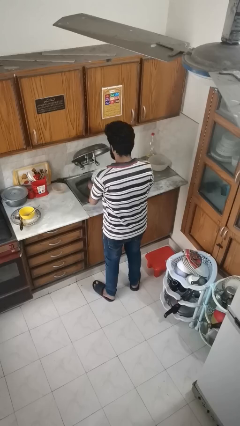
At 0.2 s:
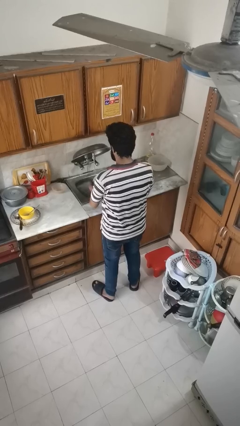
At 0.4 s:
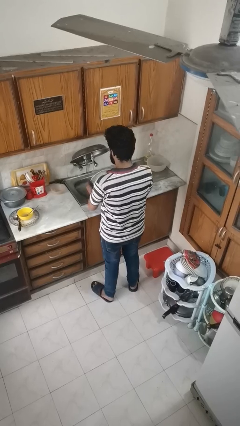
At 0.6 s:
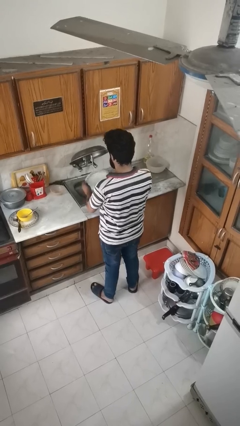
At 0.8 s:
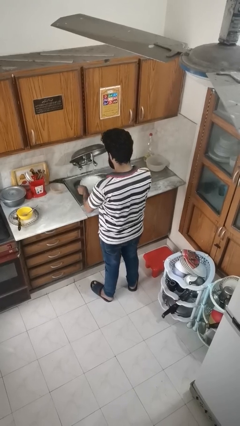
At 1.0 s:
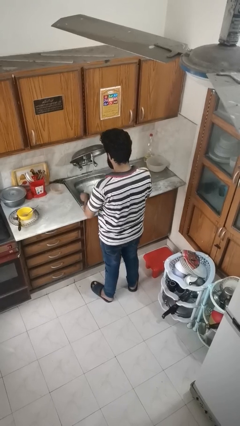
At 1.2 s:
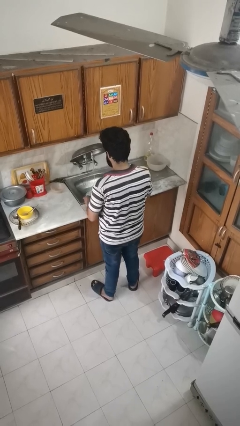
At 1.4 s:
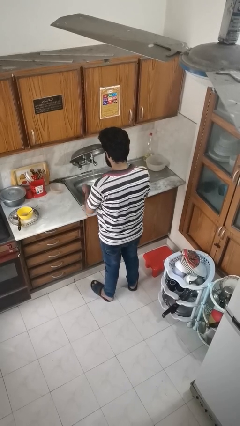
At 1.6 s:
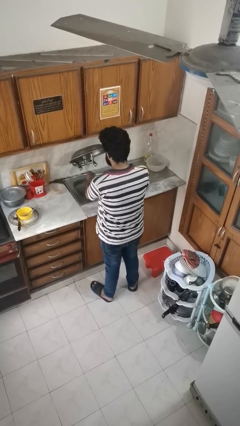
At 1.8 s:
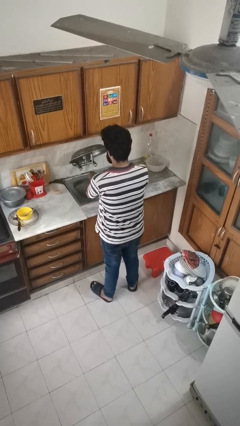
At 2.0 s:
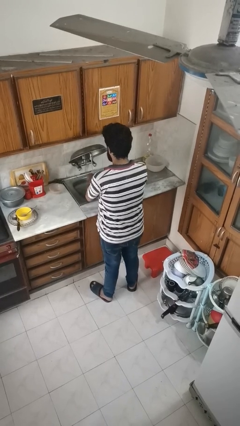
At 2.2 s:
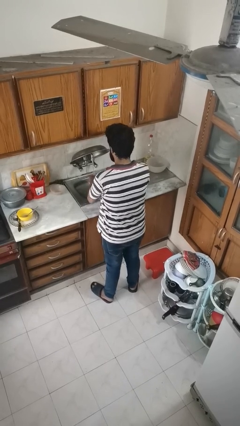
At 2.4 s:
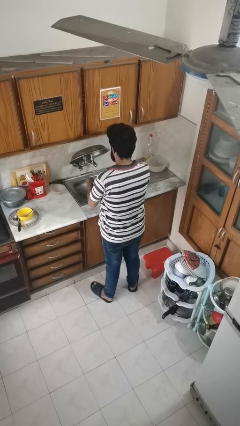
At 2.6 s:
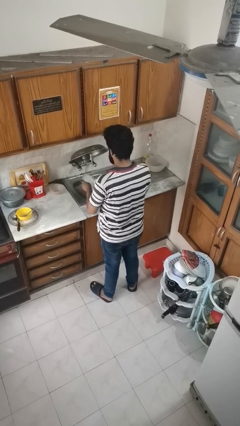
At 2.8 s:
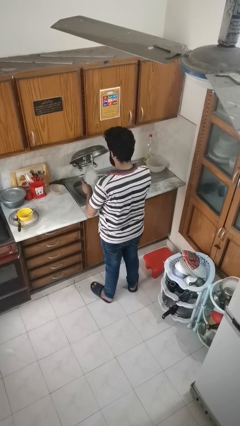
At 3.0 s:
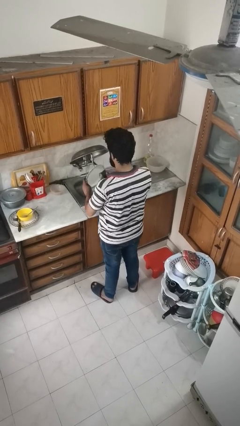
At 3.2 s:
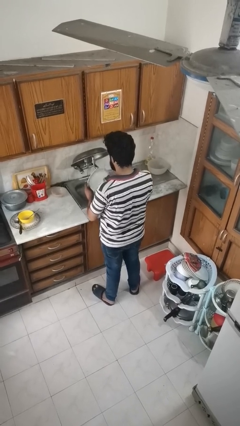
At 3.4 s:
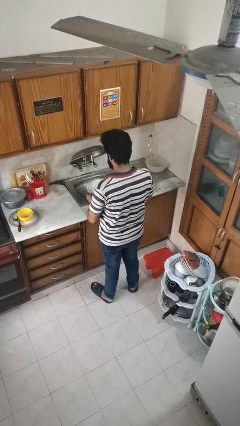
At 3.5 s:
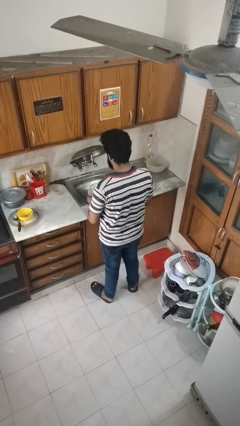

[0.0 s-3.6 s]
person washes dish

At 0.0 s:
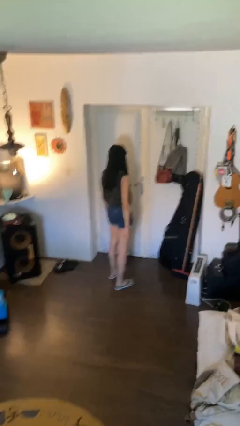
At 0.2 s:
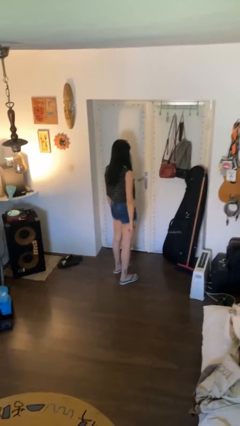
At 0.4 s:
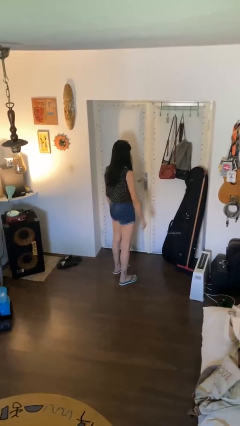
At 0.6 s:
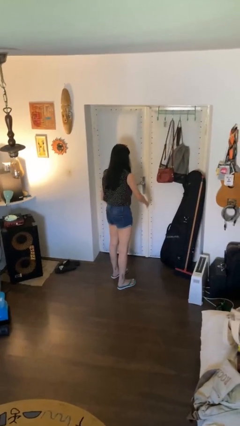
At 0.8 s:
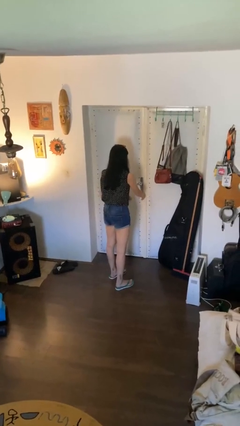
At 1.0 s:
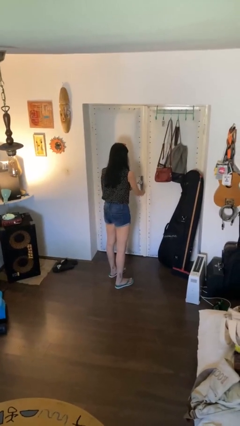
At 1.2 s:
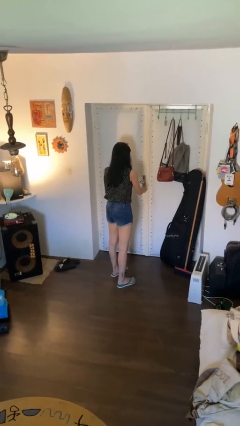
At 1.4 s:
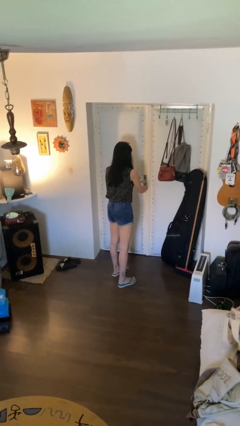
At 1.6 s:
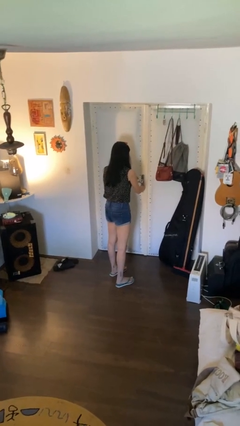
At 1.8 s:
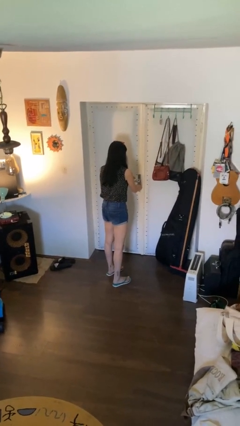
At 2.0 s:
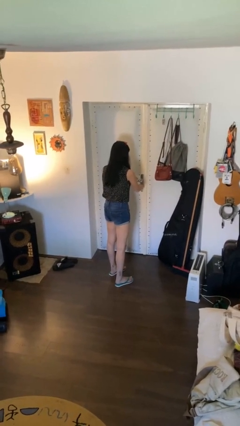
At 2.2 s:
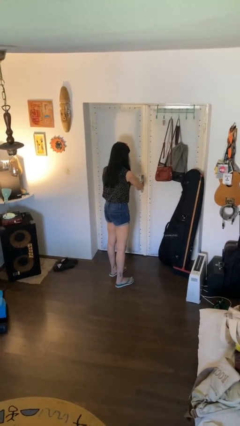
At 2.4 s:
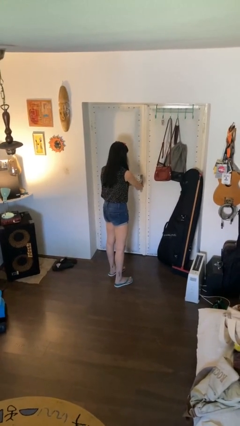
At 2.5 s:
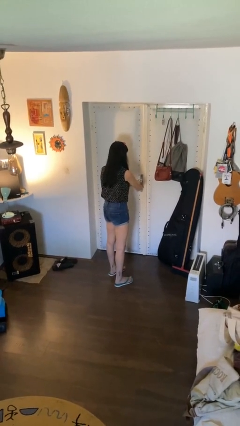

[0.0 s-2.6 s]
person unlocks door with keys

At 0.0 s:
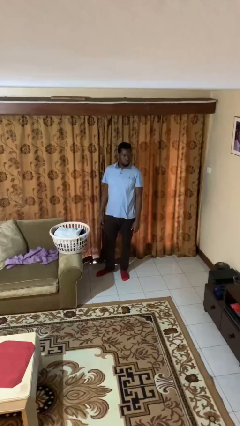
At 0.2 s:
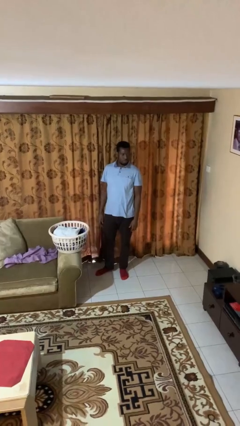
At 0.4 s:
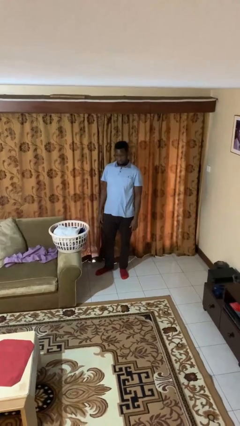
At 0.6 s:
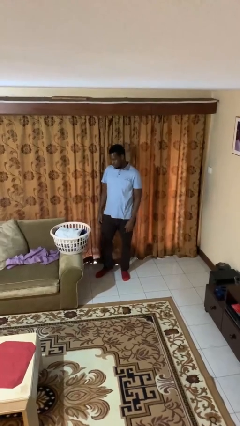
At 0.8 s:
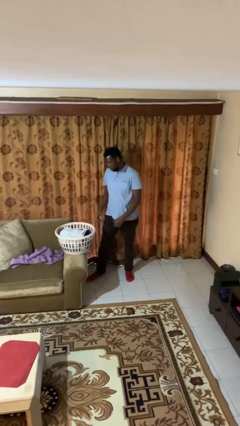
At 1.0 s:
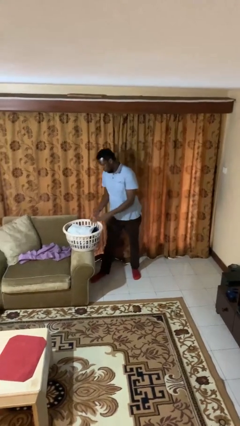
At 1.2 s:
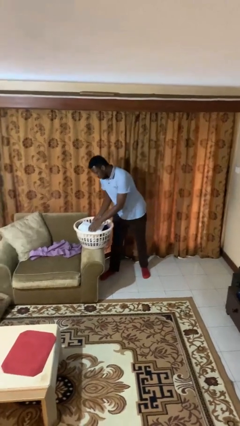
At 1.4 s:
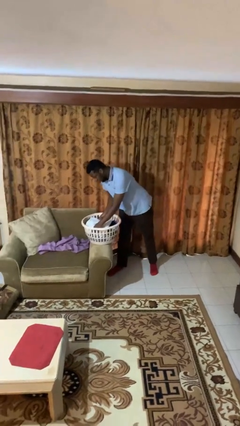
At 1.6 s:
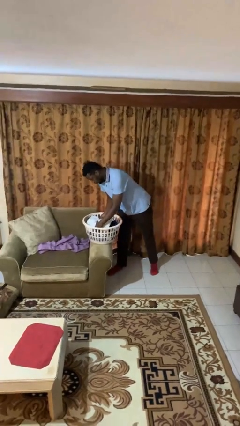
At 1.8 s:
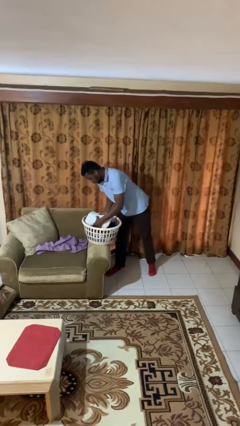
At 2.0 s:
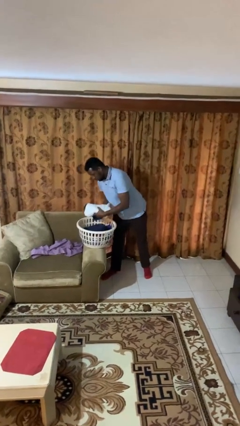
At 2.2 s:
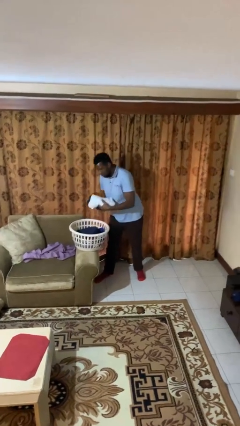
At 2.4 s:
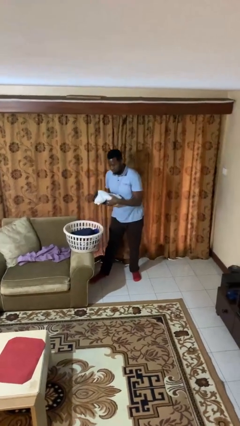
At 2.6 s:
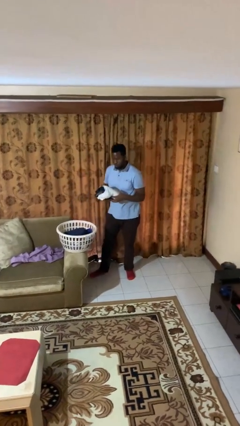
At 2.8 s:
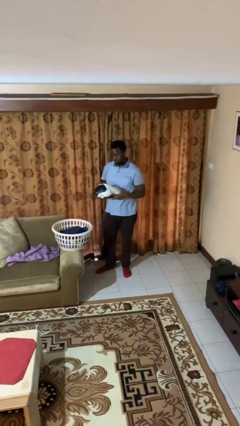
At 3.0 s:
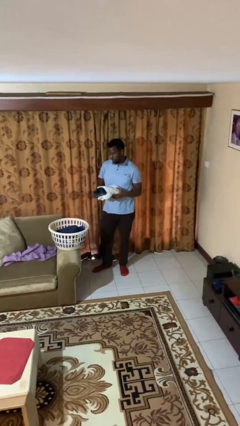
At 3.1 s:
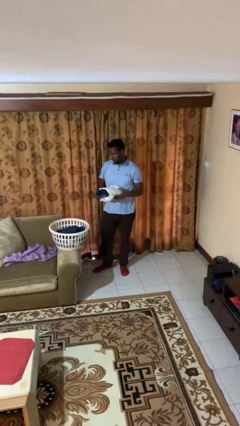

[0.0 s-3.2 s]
person takes object from basket

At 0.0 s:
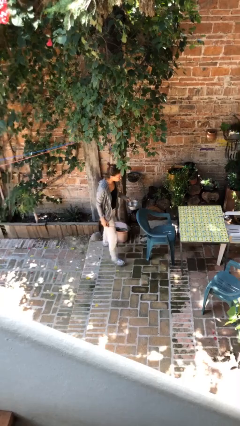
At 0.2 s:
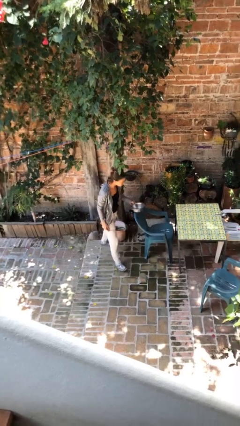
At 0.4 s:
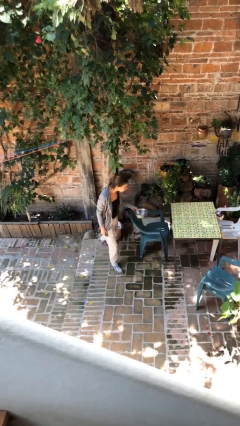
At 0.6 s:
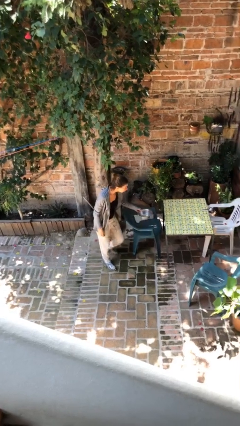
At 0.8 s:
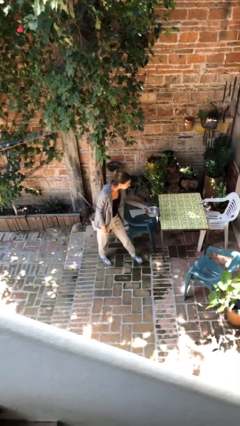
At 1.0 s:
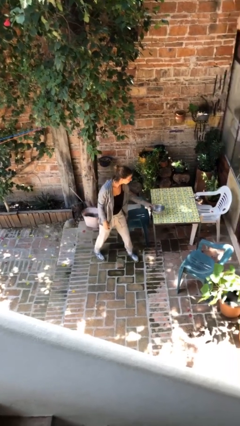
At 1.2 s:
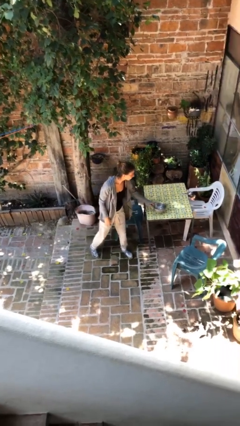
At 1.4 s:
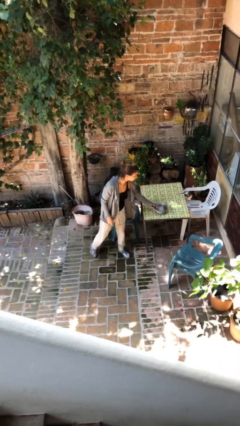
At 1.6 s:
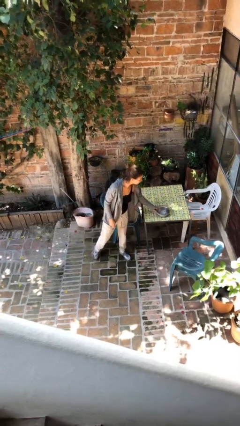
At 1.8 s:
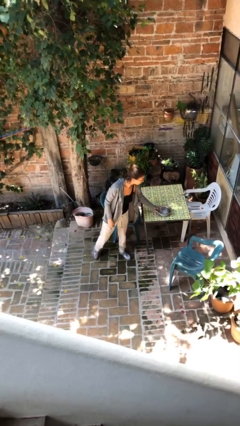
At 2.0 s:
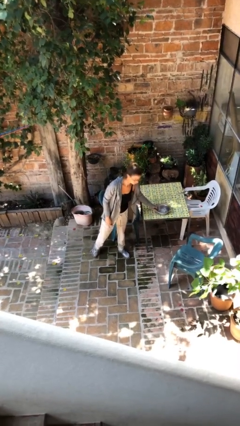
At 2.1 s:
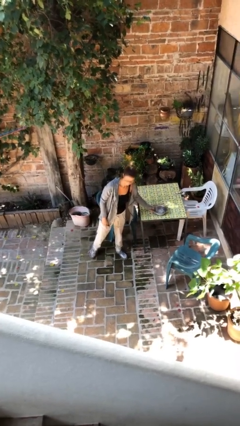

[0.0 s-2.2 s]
person puts down object on table

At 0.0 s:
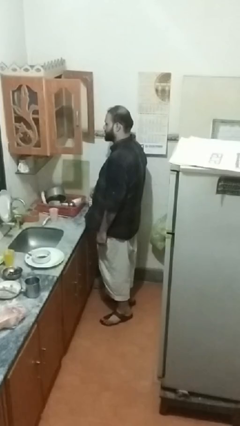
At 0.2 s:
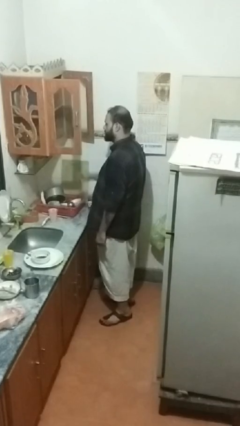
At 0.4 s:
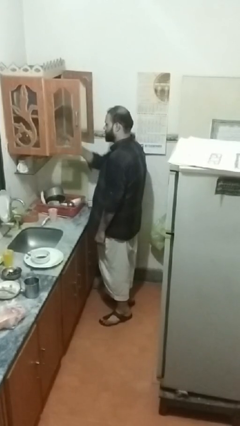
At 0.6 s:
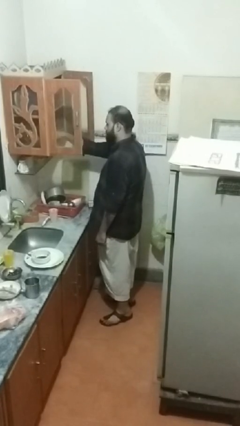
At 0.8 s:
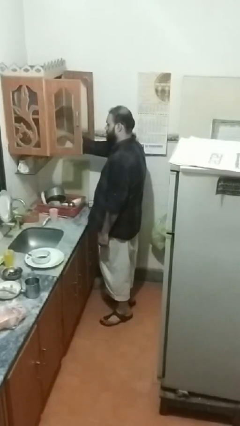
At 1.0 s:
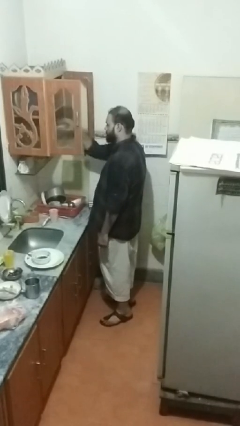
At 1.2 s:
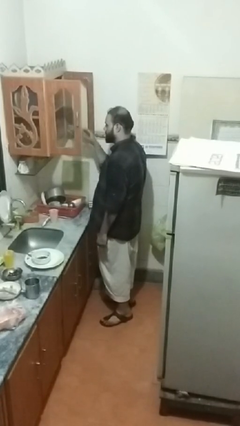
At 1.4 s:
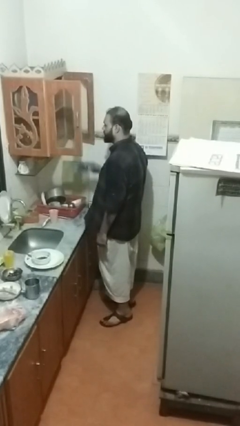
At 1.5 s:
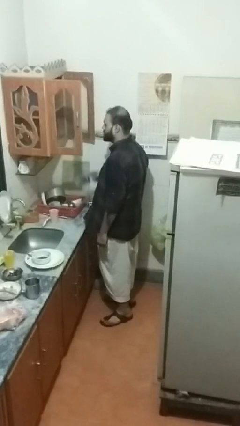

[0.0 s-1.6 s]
person takes object from cabinet

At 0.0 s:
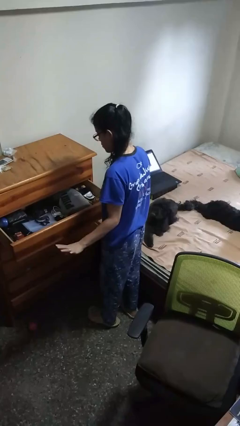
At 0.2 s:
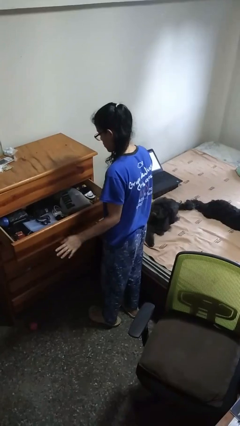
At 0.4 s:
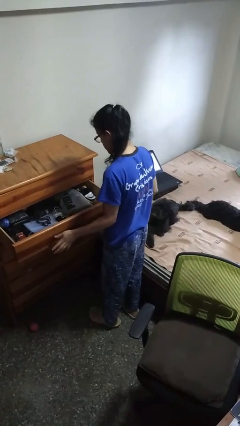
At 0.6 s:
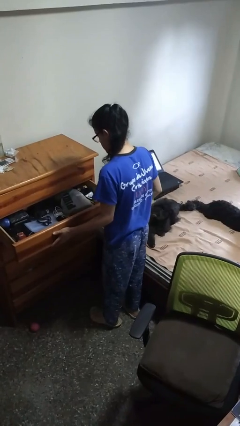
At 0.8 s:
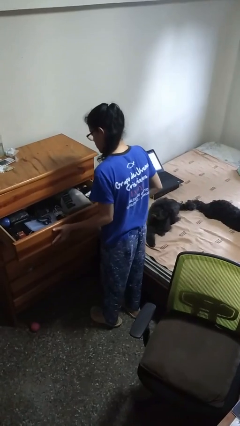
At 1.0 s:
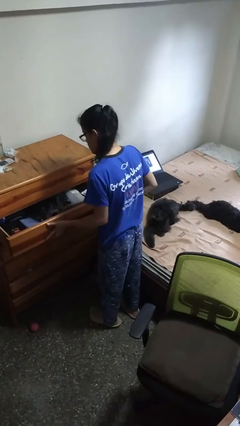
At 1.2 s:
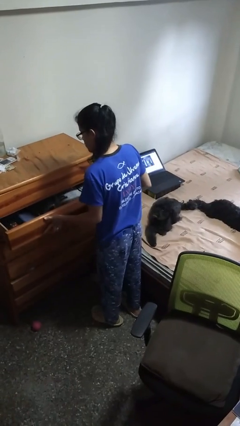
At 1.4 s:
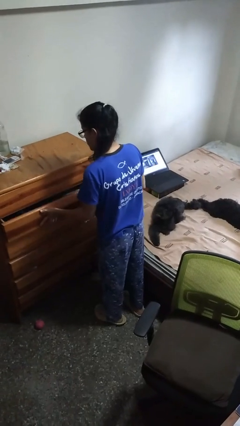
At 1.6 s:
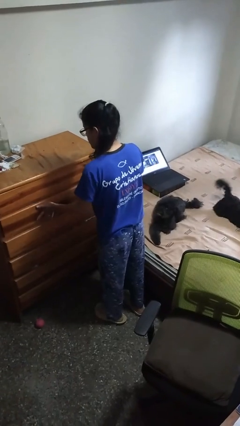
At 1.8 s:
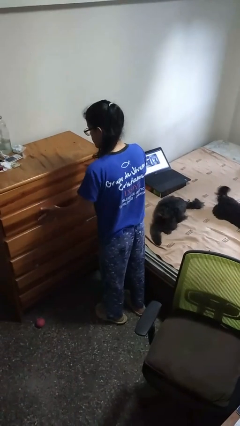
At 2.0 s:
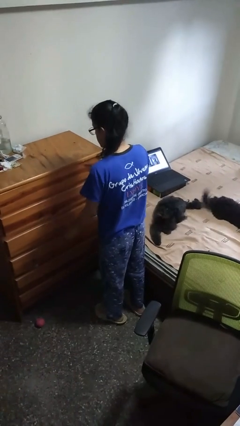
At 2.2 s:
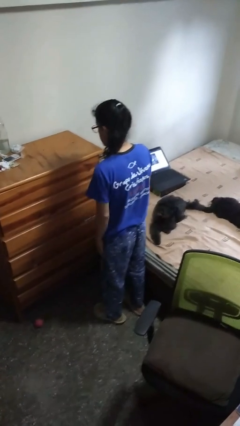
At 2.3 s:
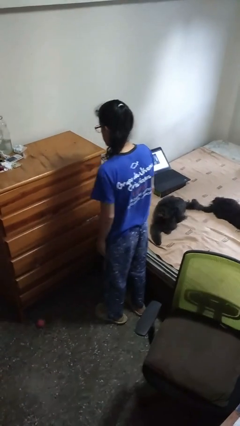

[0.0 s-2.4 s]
person closes dresser drawer

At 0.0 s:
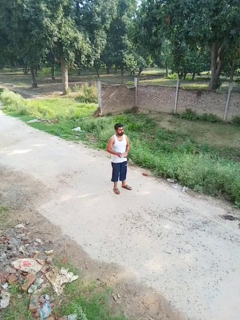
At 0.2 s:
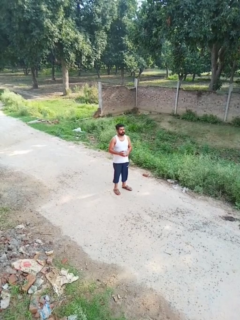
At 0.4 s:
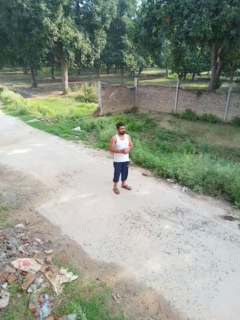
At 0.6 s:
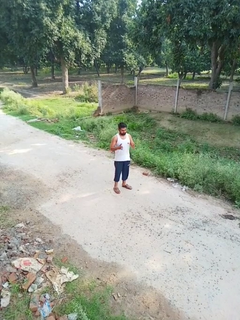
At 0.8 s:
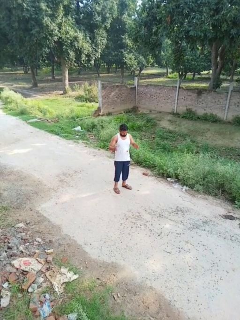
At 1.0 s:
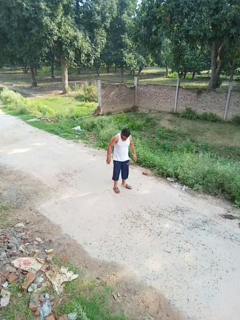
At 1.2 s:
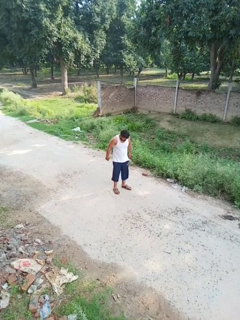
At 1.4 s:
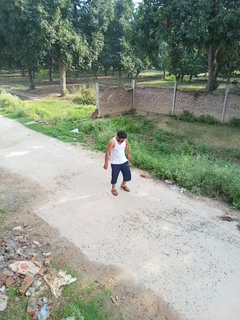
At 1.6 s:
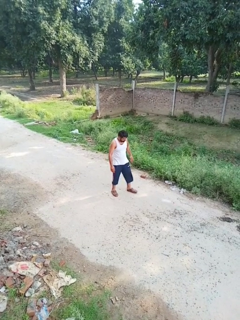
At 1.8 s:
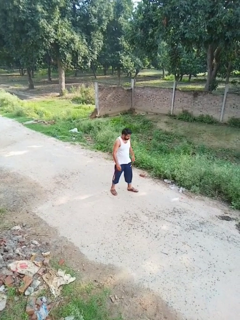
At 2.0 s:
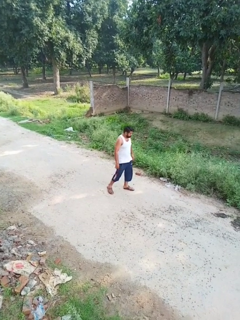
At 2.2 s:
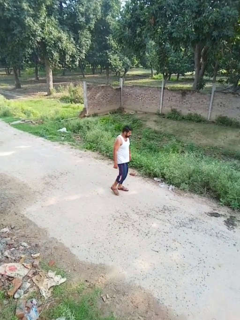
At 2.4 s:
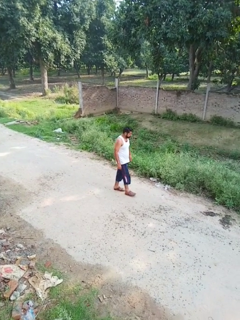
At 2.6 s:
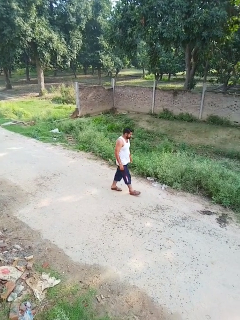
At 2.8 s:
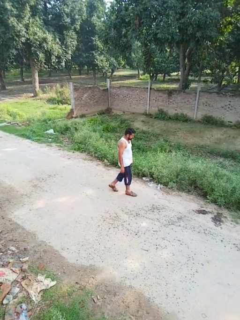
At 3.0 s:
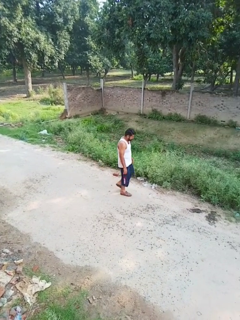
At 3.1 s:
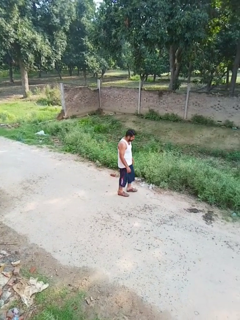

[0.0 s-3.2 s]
person drops object
